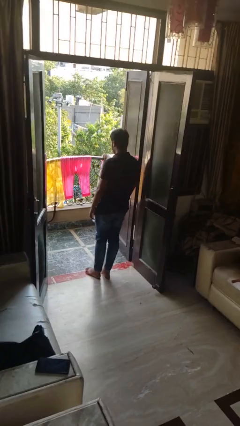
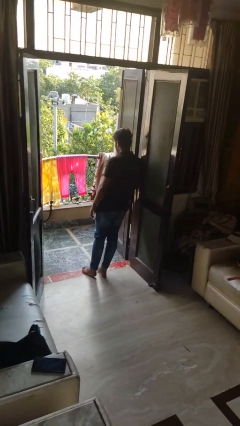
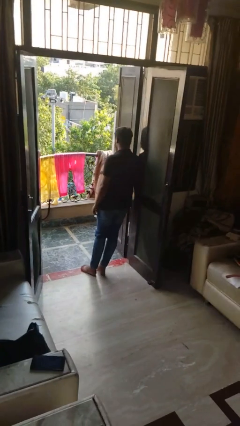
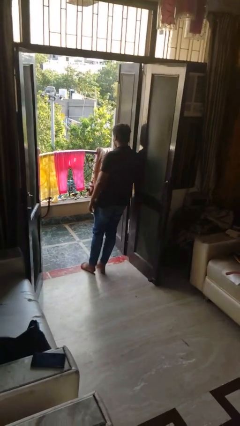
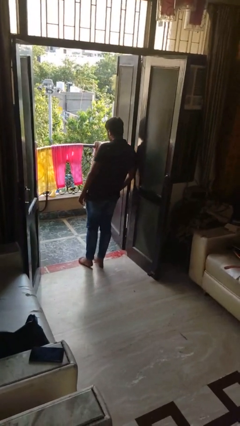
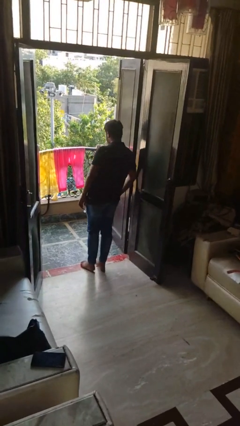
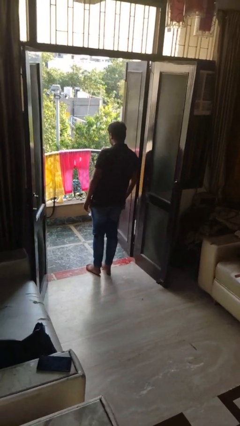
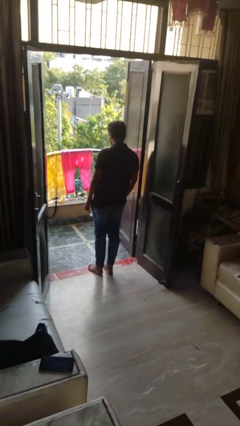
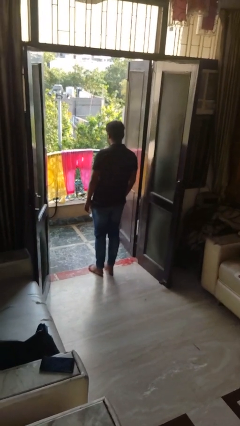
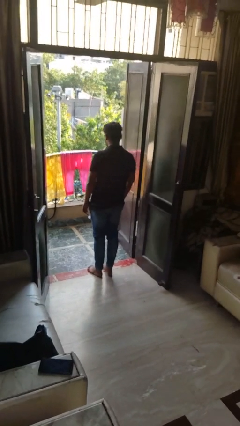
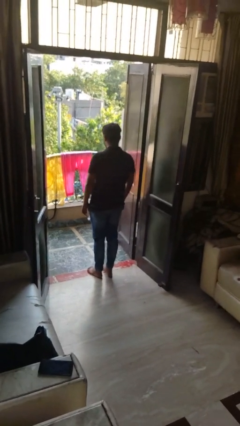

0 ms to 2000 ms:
person bumps into wall

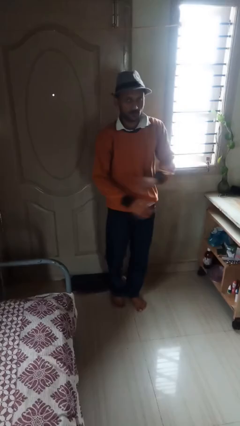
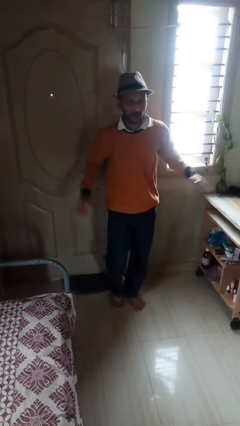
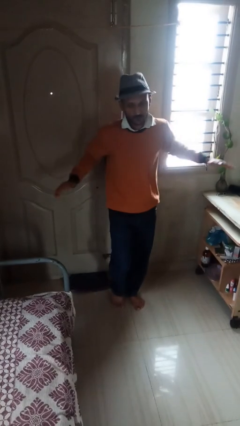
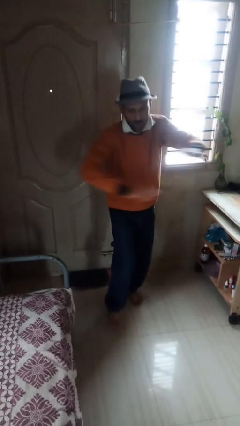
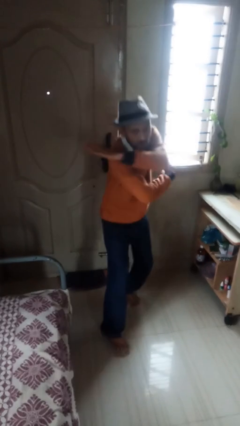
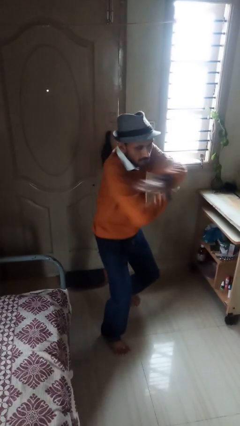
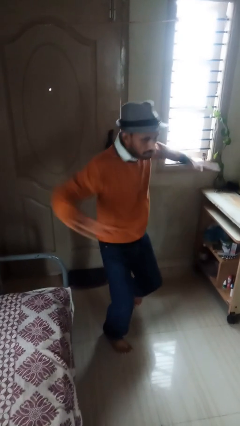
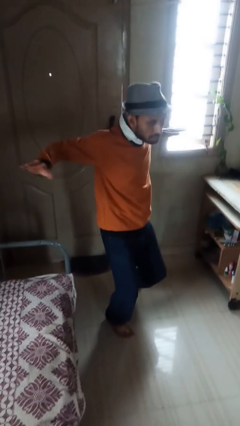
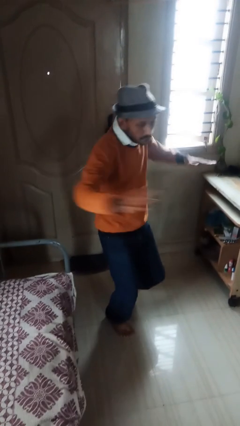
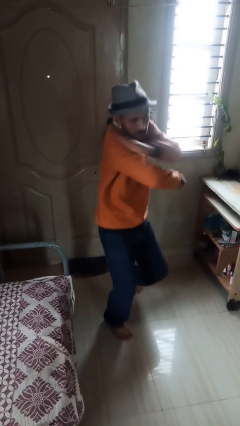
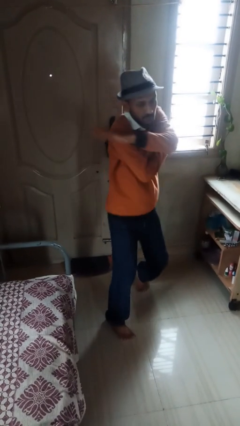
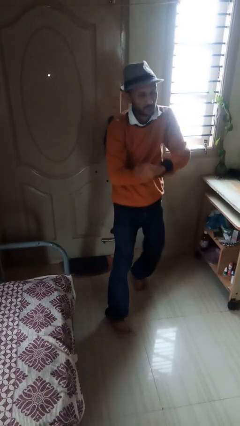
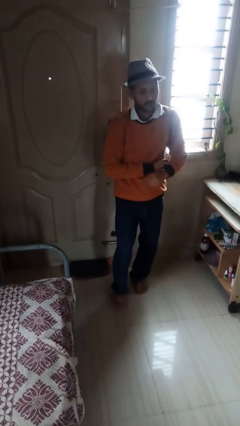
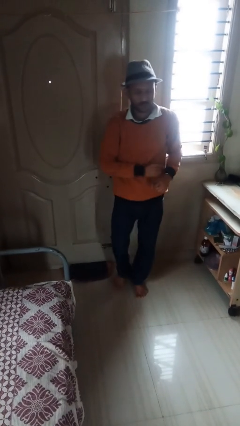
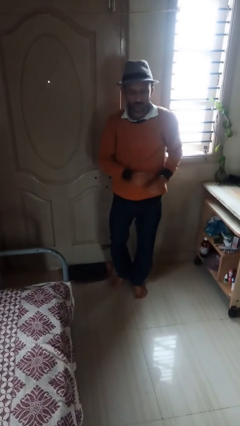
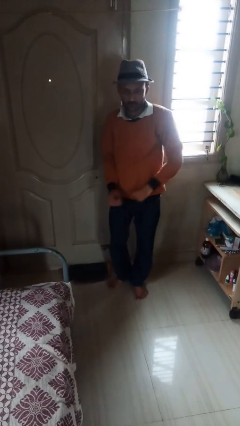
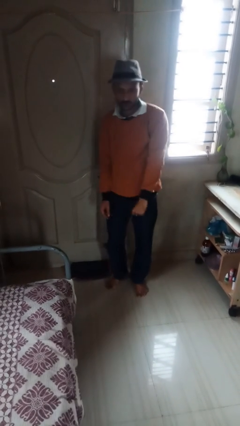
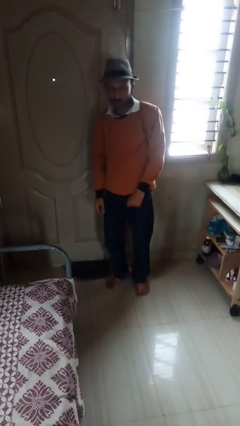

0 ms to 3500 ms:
person karate chop

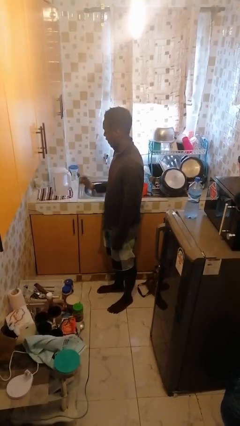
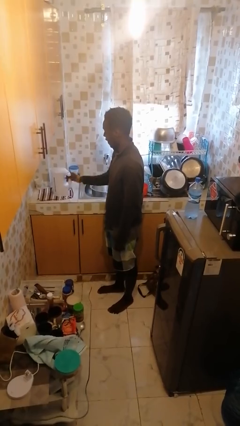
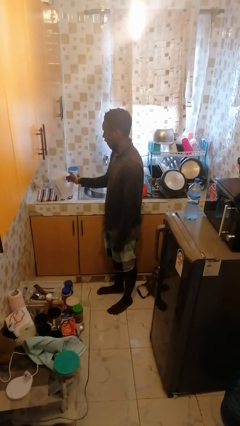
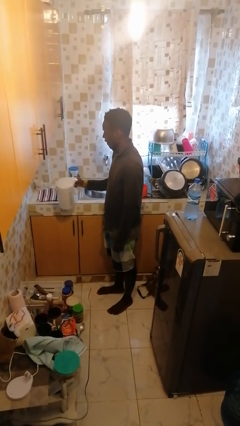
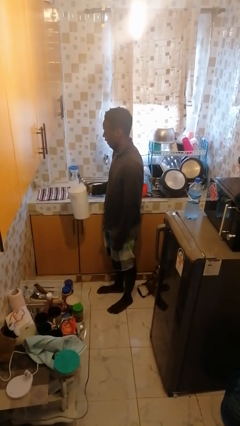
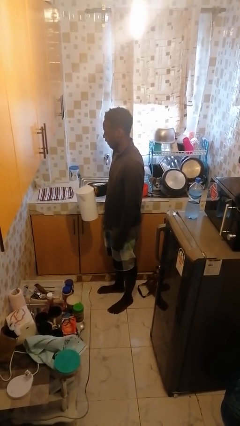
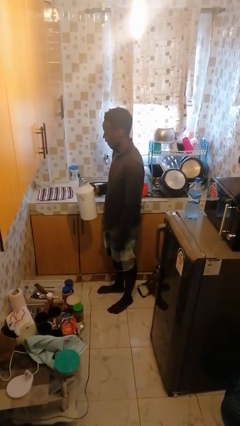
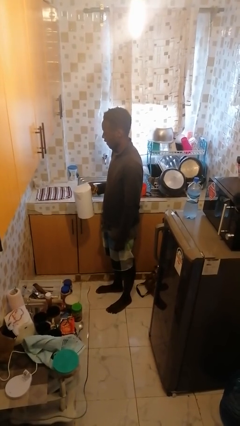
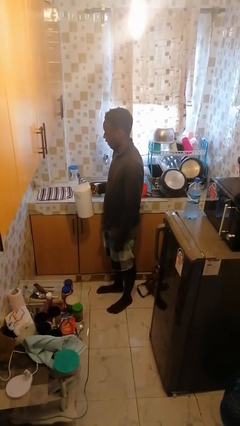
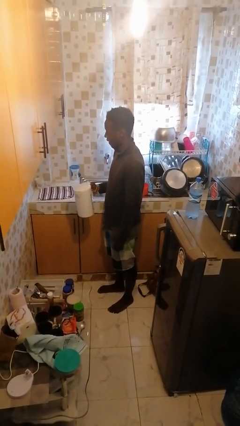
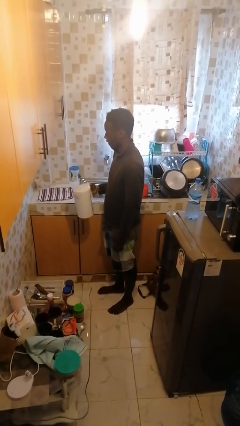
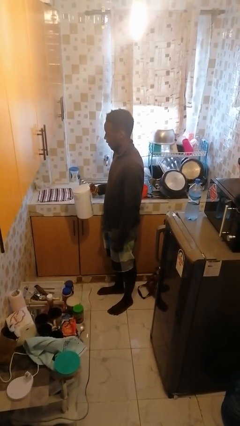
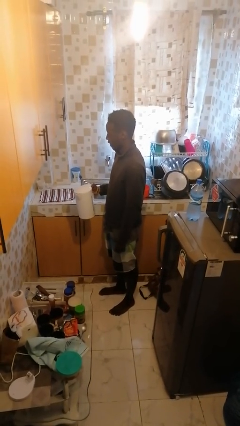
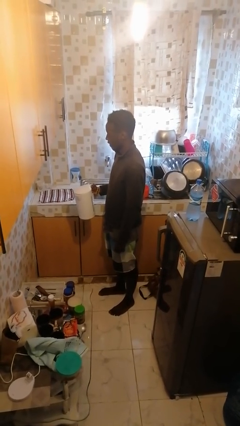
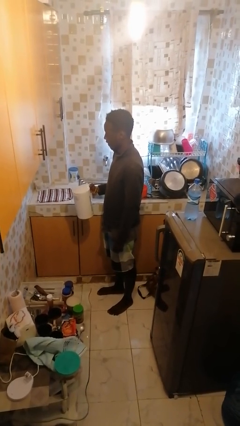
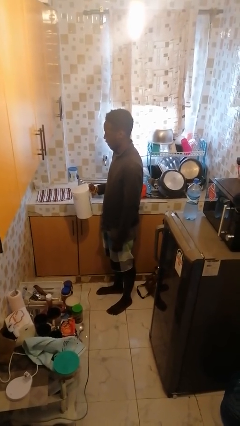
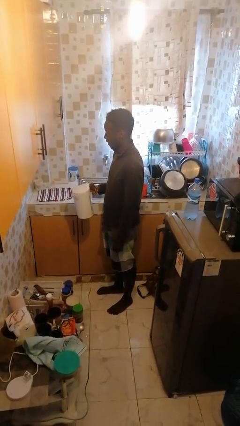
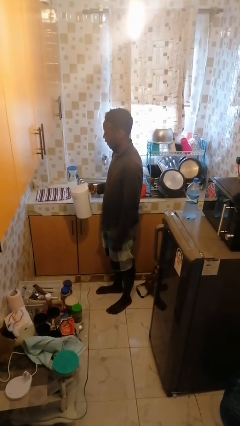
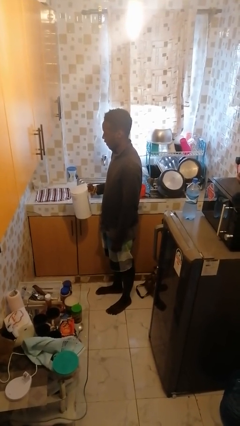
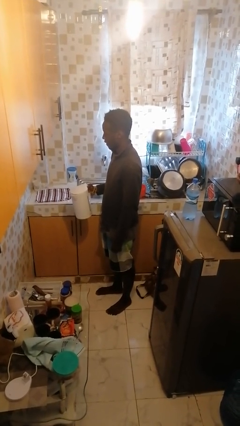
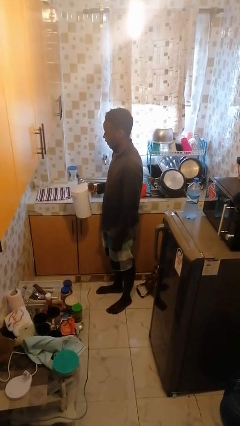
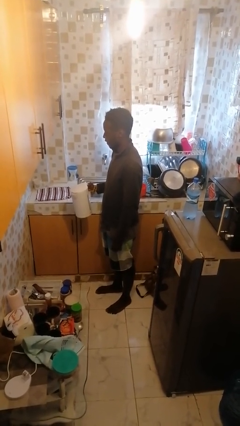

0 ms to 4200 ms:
person picks up object from countertop

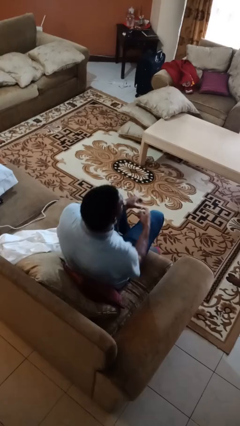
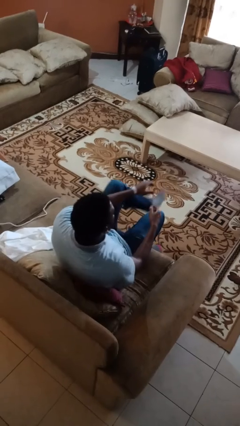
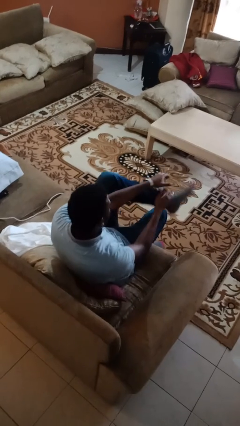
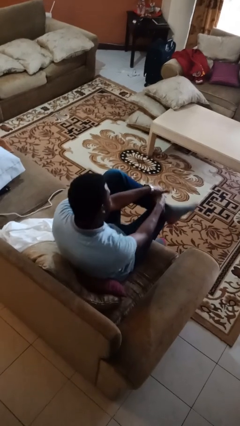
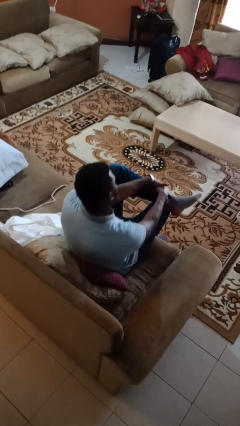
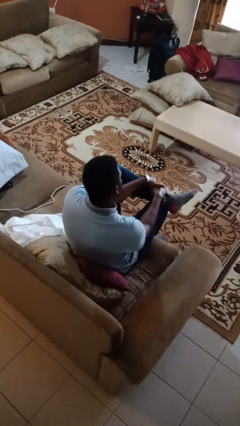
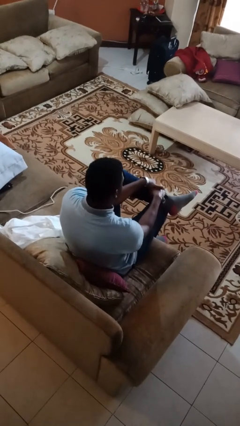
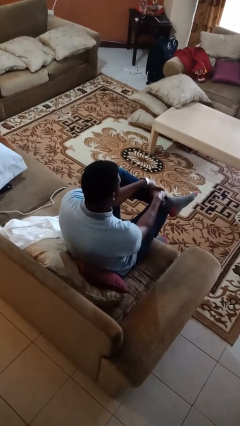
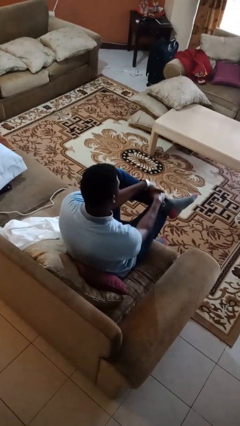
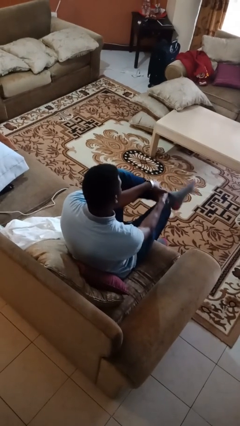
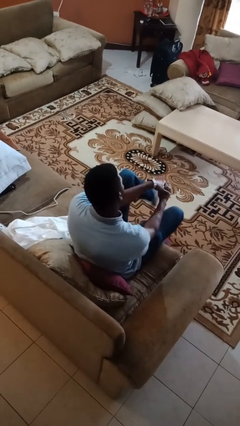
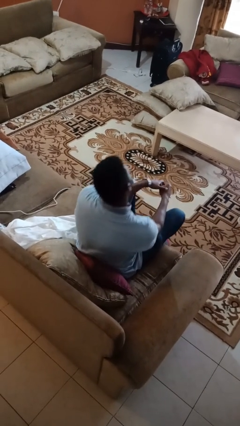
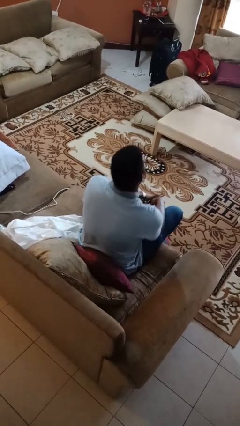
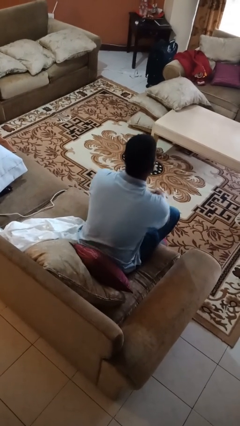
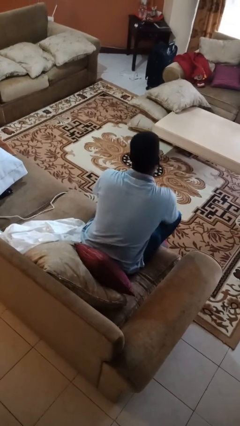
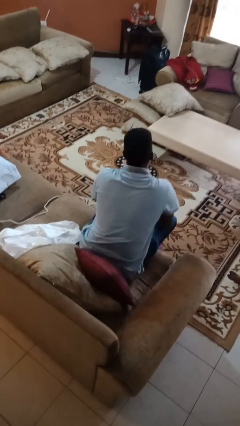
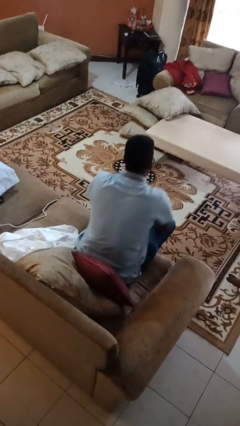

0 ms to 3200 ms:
person crosses legs

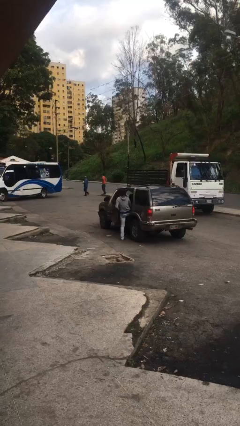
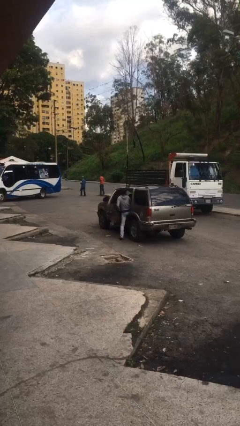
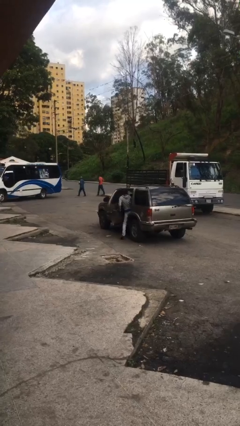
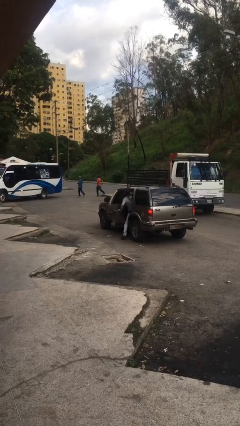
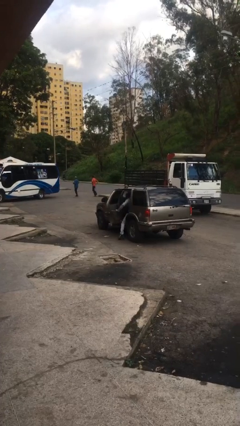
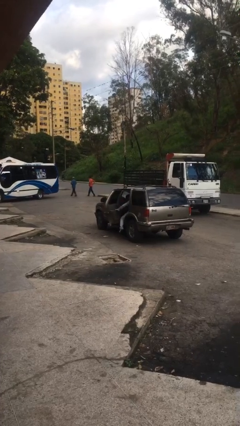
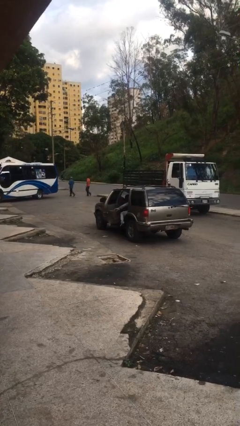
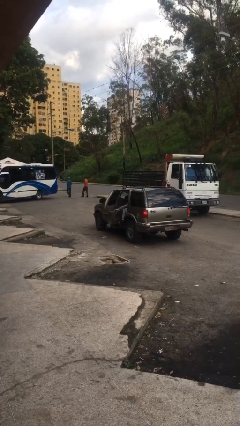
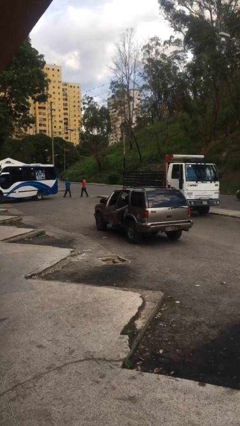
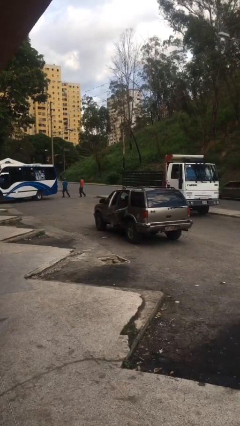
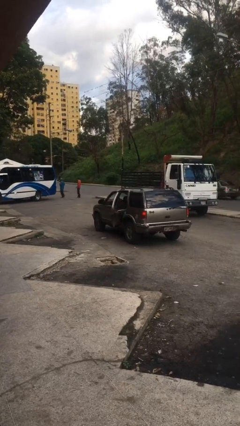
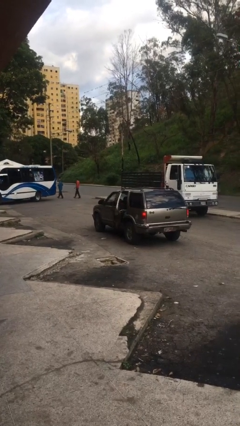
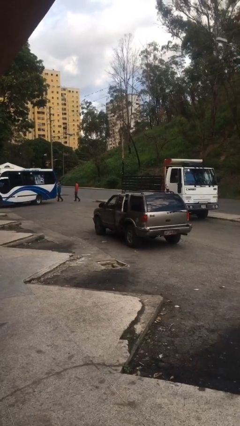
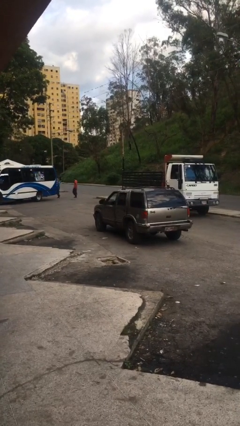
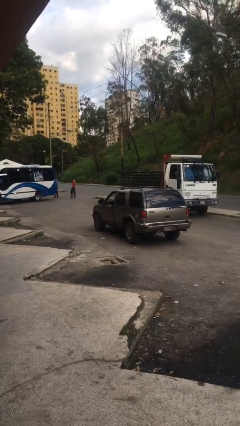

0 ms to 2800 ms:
person enters car

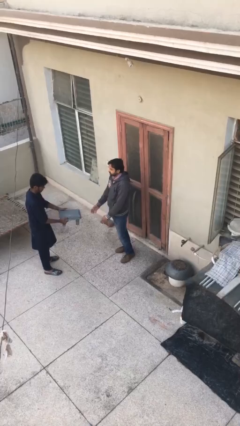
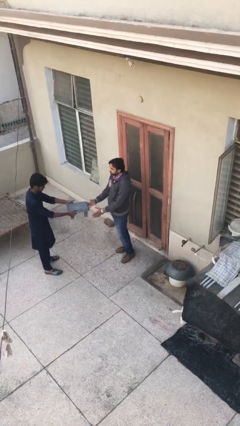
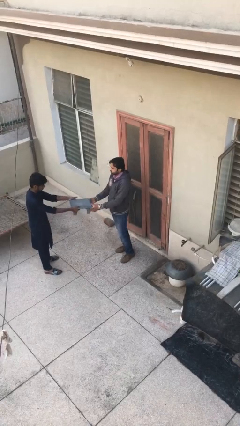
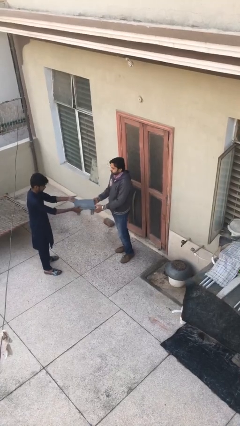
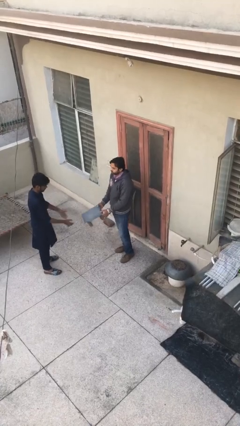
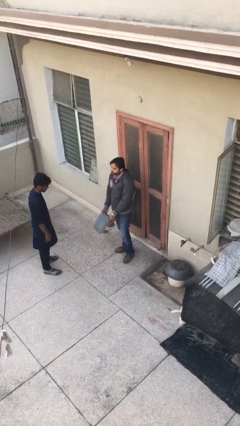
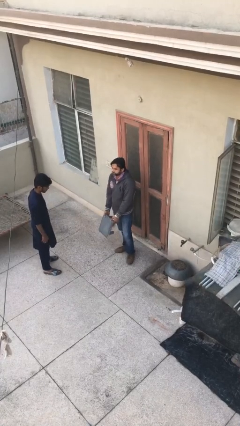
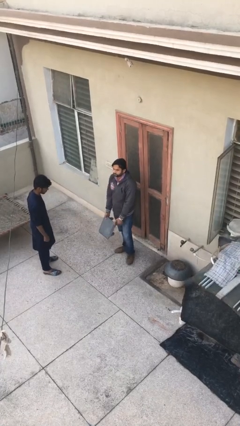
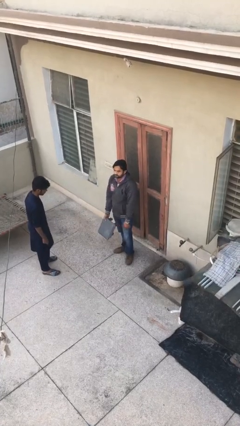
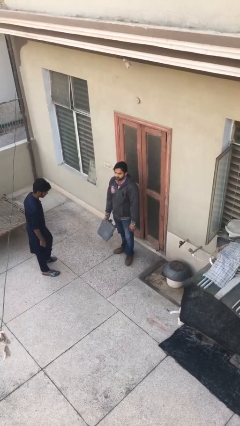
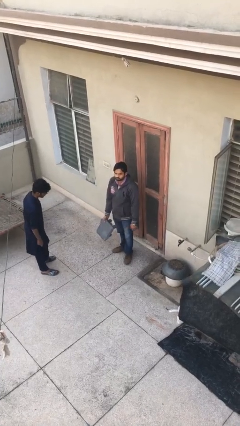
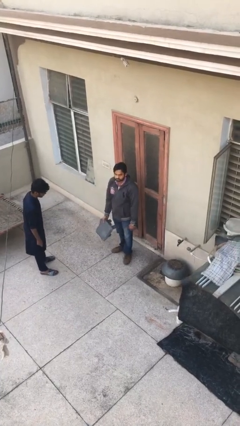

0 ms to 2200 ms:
person transfers object to person
